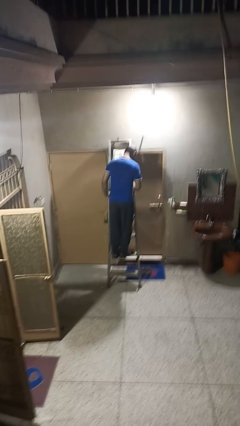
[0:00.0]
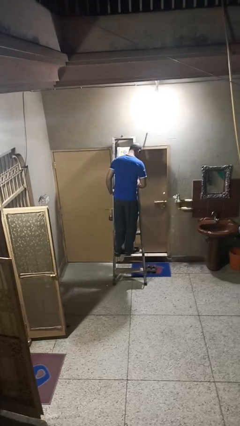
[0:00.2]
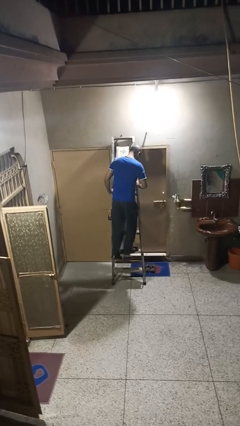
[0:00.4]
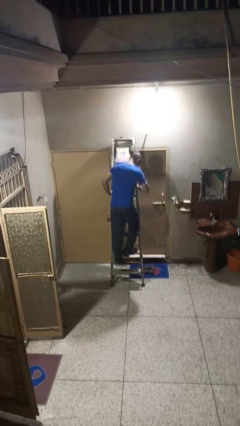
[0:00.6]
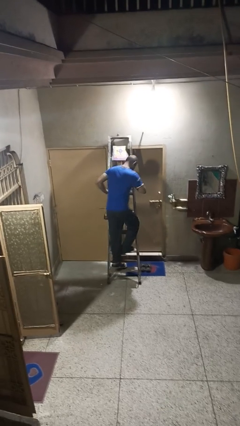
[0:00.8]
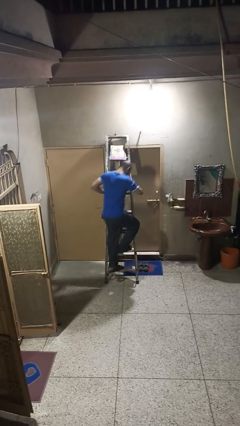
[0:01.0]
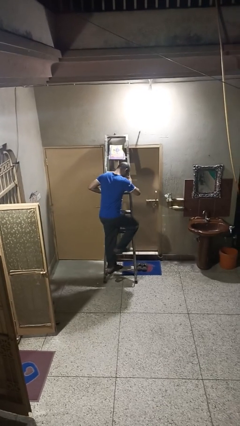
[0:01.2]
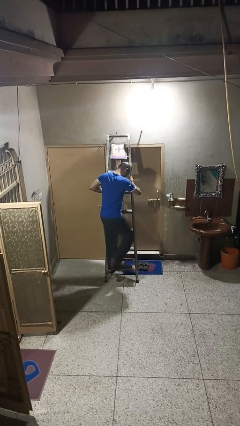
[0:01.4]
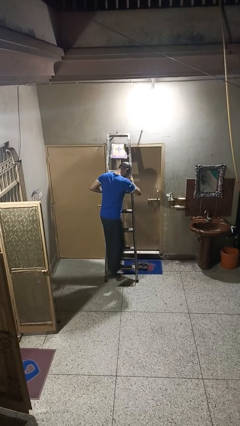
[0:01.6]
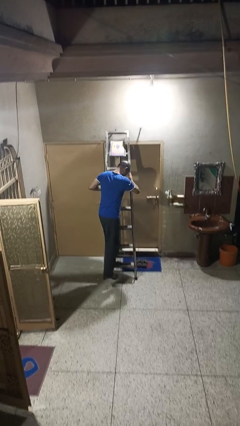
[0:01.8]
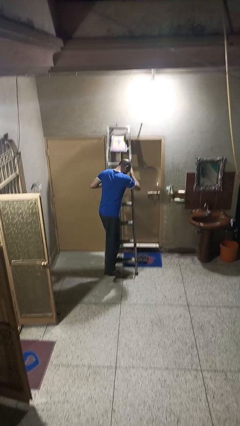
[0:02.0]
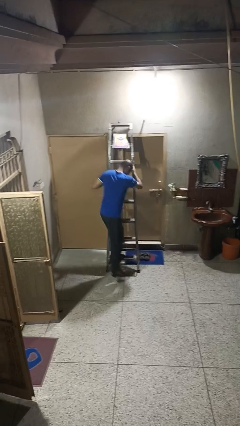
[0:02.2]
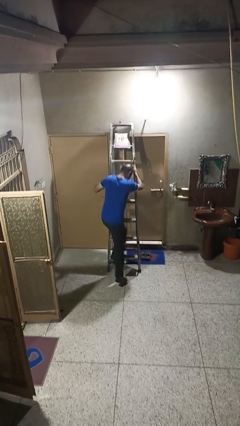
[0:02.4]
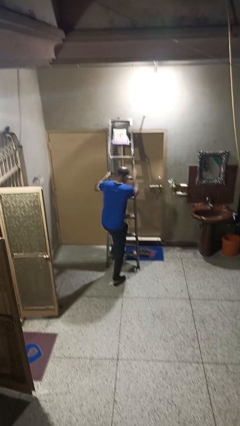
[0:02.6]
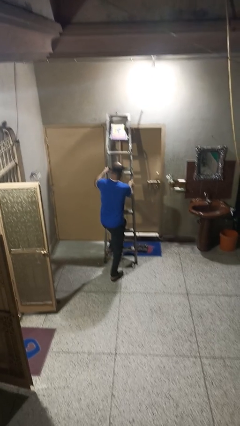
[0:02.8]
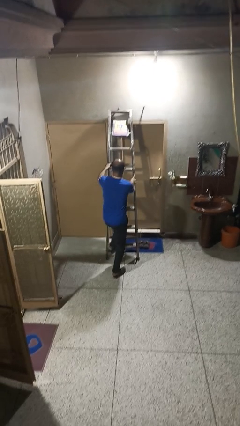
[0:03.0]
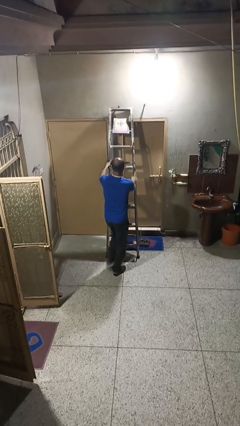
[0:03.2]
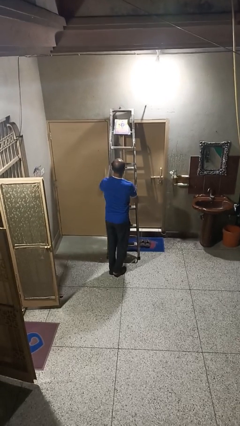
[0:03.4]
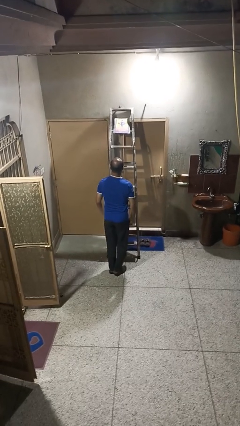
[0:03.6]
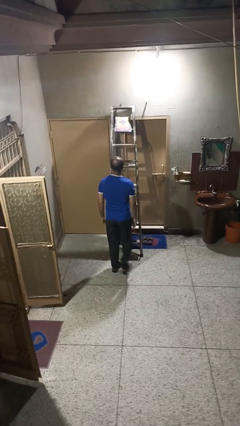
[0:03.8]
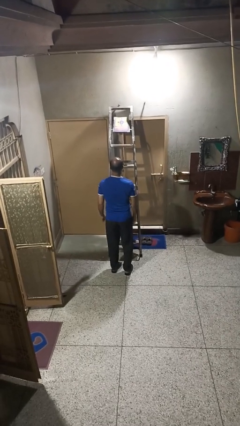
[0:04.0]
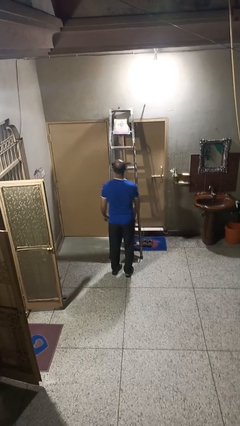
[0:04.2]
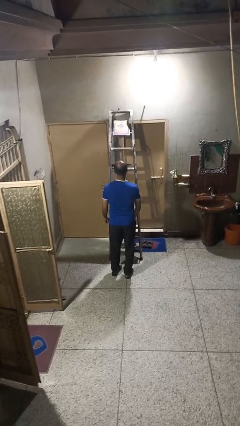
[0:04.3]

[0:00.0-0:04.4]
person climbs down ladder

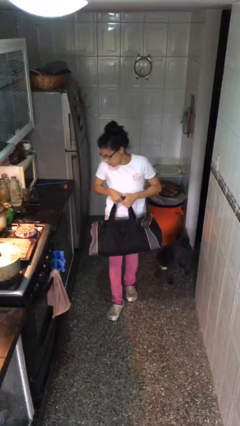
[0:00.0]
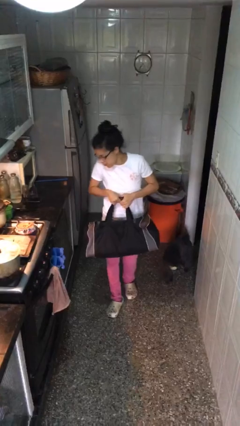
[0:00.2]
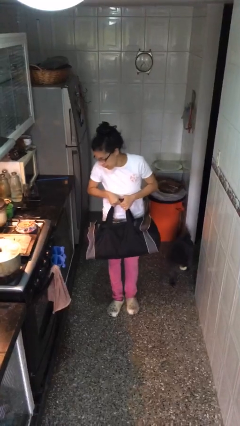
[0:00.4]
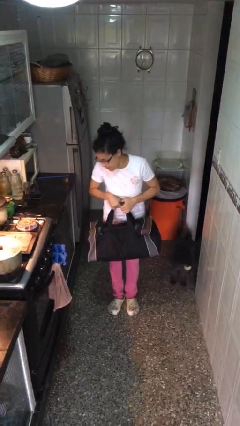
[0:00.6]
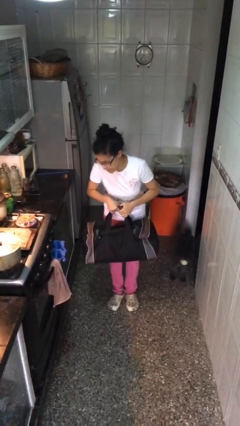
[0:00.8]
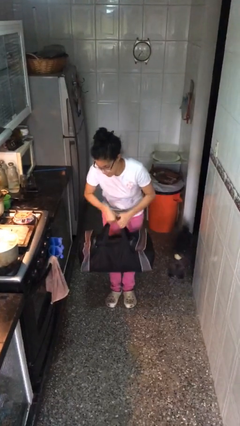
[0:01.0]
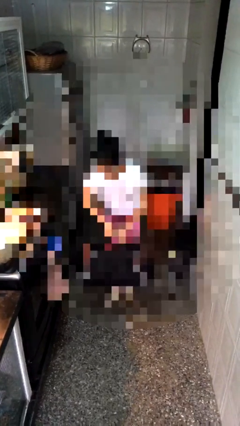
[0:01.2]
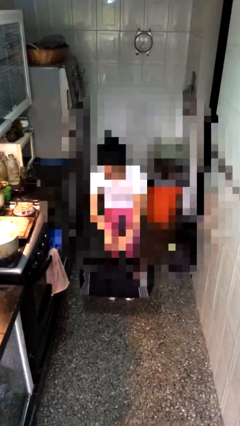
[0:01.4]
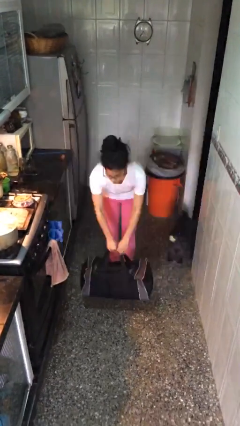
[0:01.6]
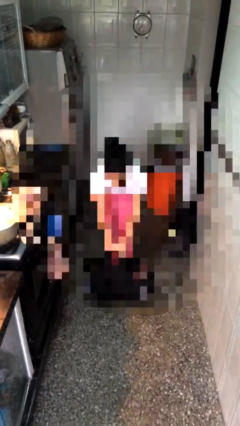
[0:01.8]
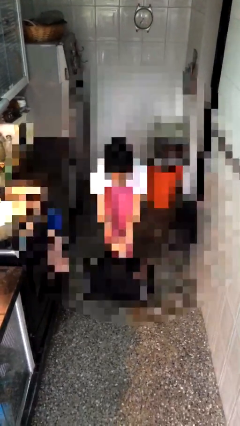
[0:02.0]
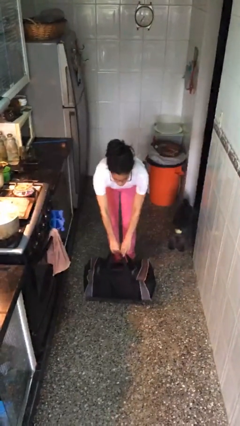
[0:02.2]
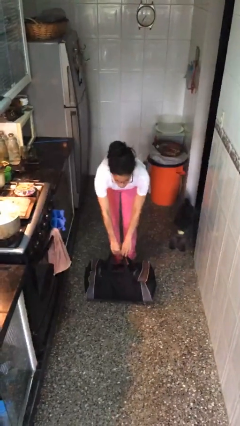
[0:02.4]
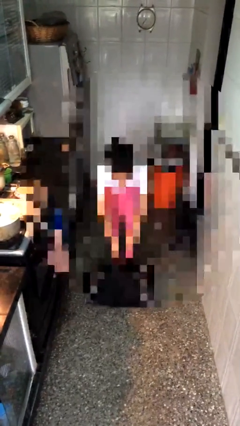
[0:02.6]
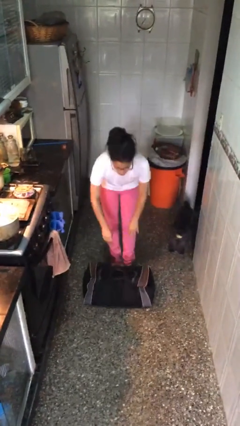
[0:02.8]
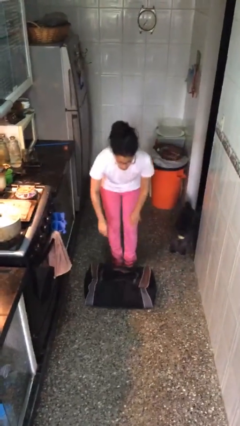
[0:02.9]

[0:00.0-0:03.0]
person puts down object on floor

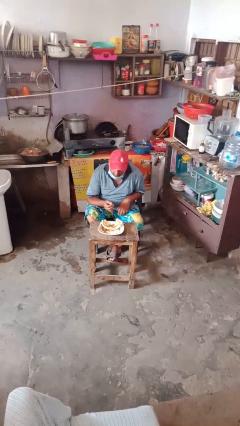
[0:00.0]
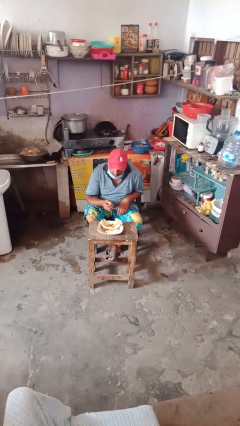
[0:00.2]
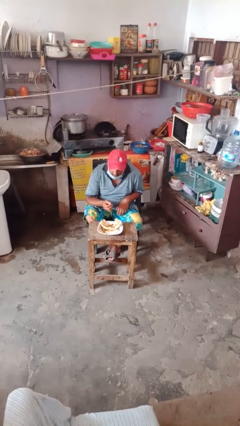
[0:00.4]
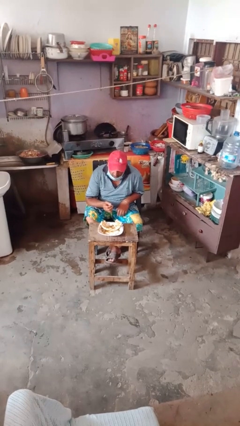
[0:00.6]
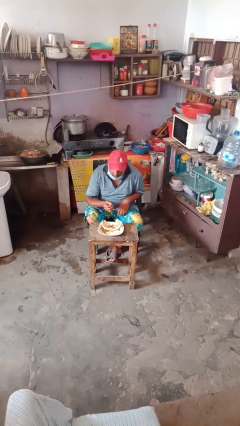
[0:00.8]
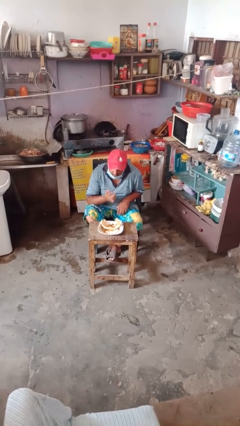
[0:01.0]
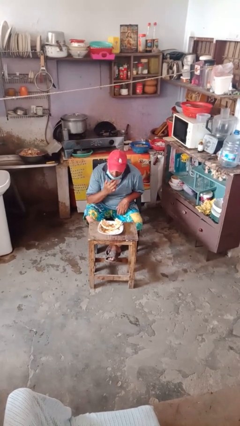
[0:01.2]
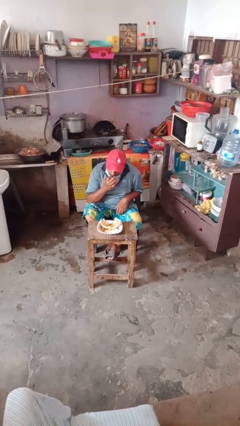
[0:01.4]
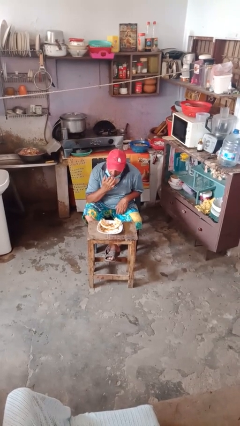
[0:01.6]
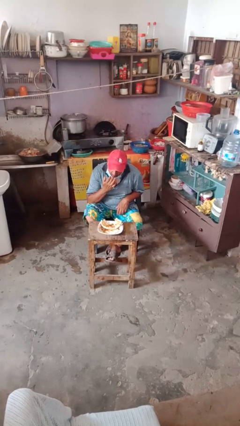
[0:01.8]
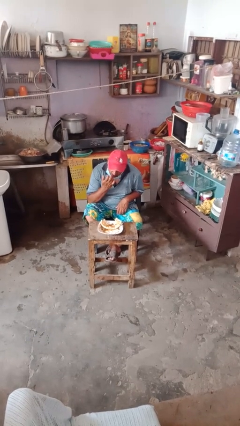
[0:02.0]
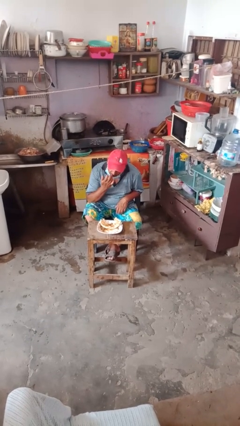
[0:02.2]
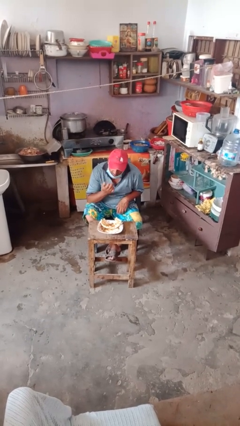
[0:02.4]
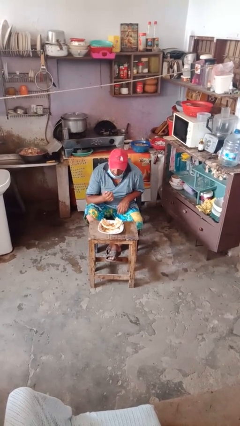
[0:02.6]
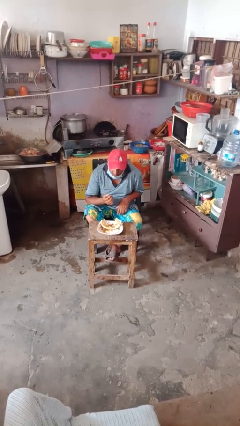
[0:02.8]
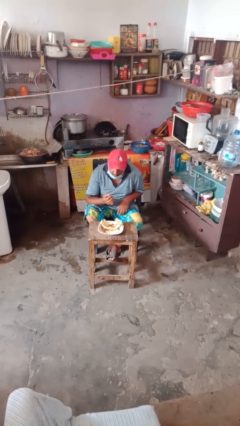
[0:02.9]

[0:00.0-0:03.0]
person licks fingers

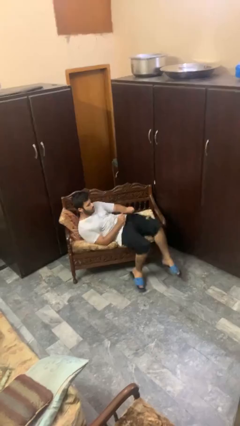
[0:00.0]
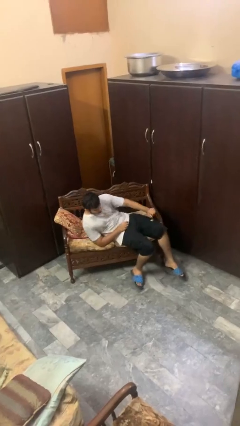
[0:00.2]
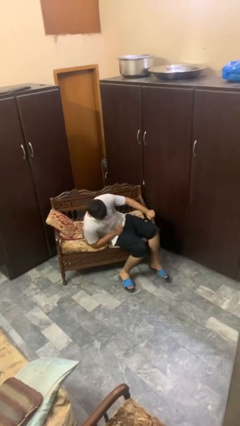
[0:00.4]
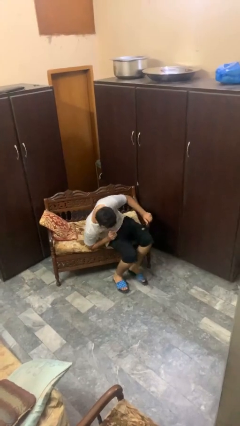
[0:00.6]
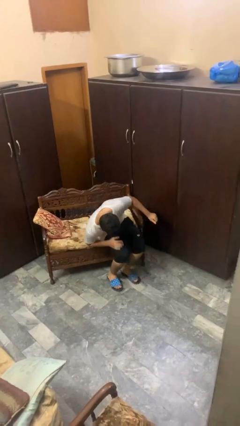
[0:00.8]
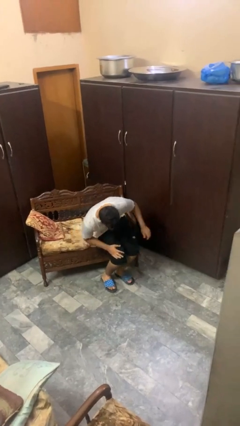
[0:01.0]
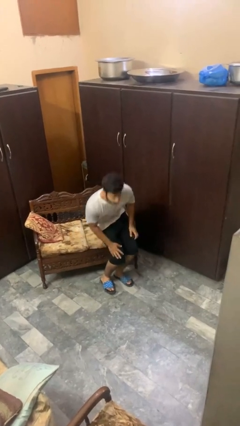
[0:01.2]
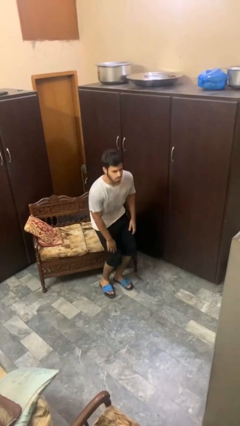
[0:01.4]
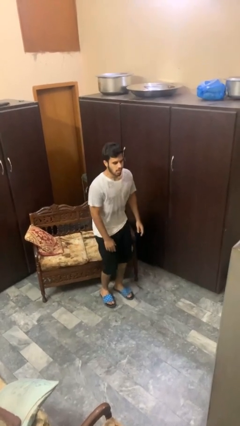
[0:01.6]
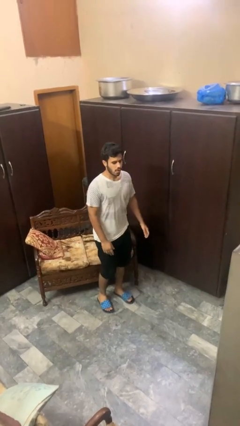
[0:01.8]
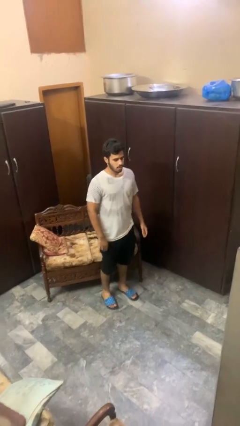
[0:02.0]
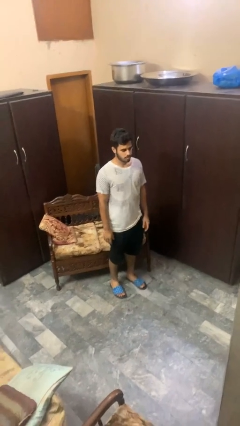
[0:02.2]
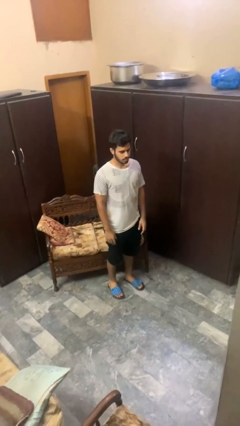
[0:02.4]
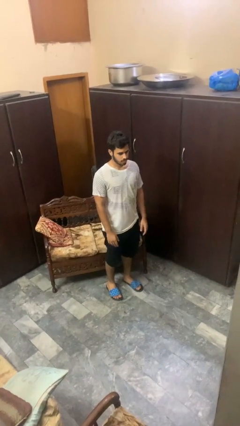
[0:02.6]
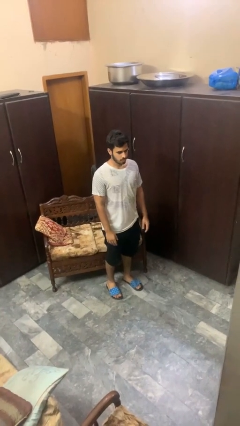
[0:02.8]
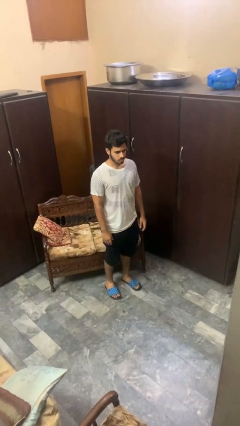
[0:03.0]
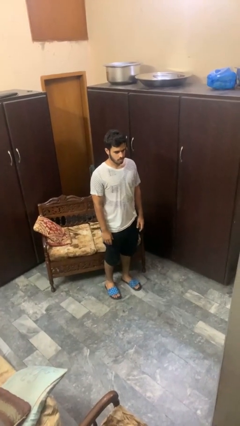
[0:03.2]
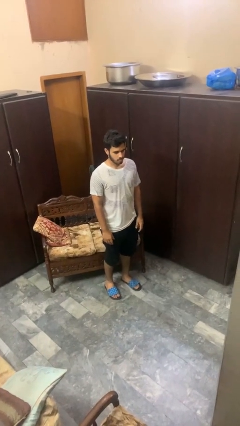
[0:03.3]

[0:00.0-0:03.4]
person stands up

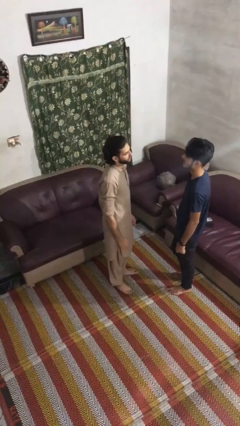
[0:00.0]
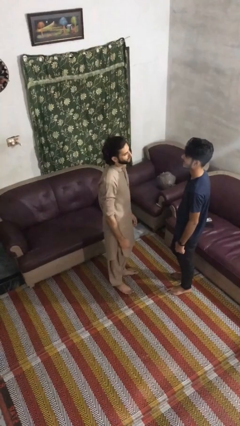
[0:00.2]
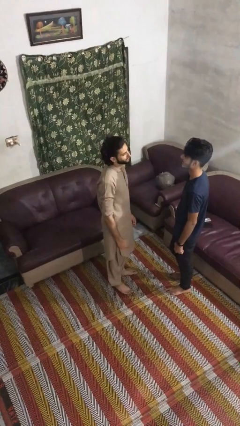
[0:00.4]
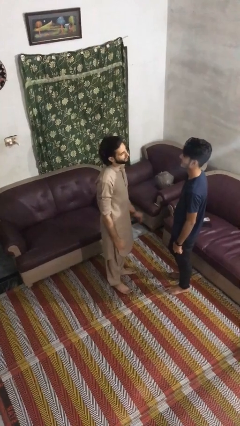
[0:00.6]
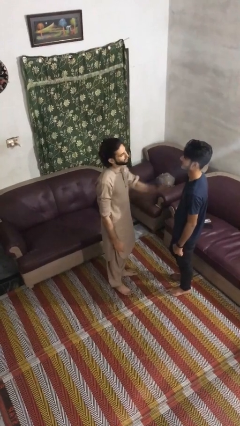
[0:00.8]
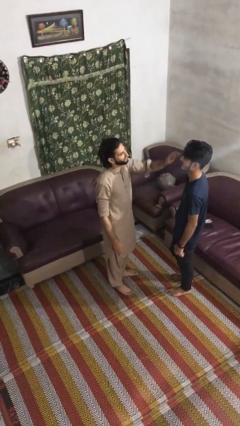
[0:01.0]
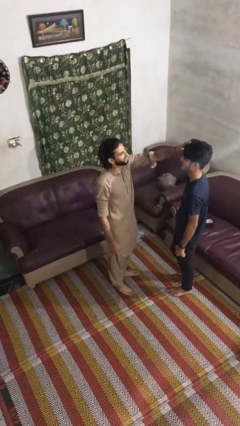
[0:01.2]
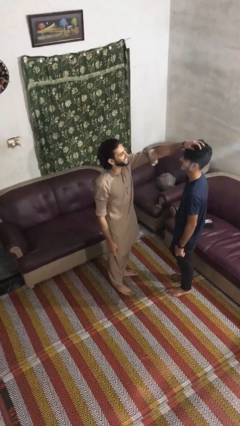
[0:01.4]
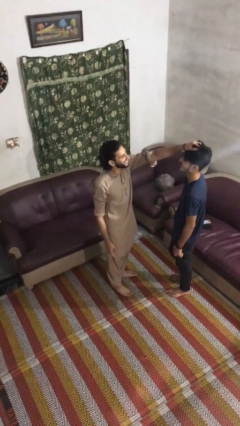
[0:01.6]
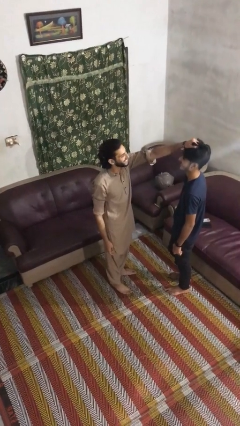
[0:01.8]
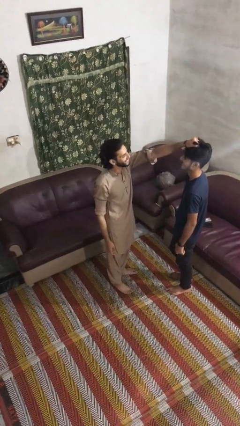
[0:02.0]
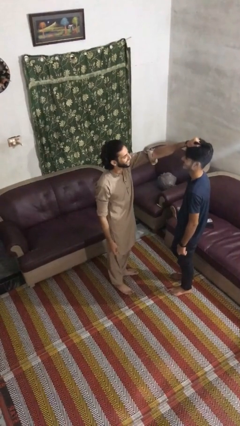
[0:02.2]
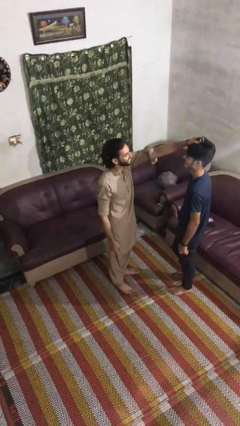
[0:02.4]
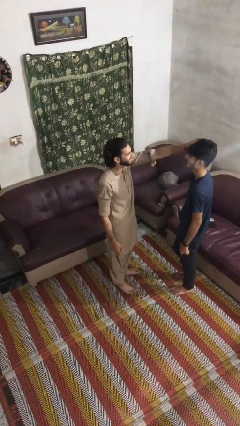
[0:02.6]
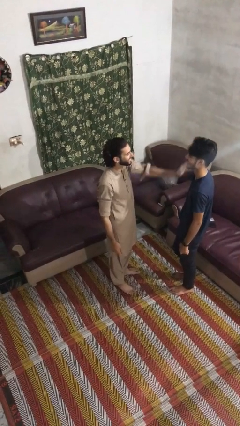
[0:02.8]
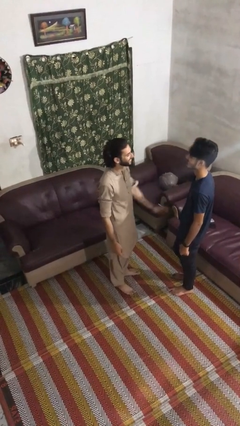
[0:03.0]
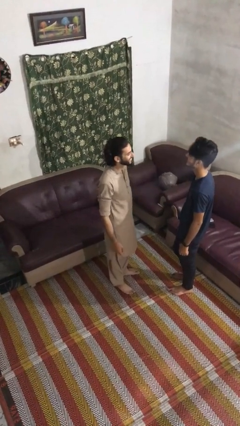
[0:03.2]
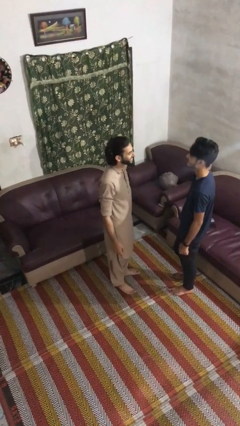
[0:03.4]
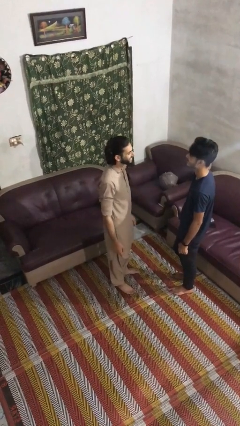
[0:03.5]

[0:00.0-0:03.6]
person grabs person by hair
